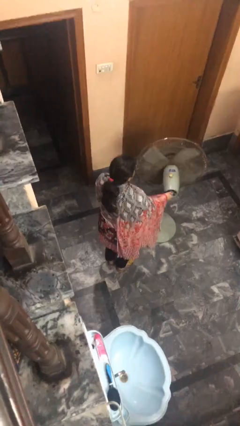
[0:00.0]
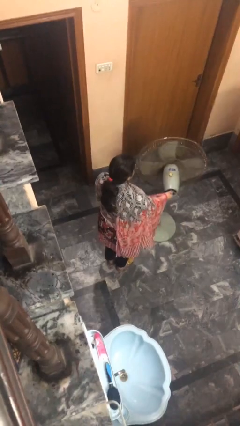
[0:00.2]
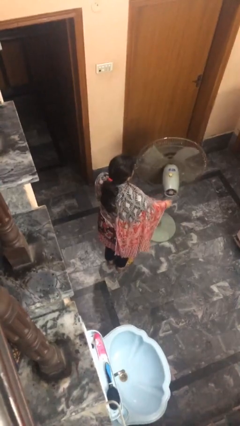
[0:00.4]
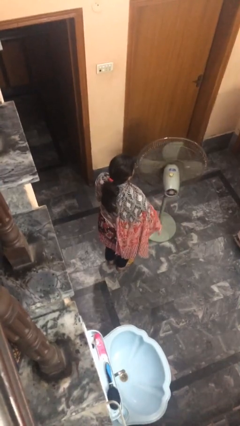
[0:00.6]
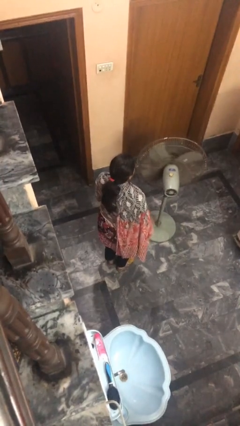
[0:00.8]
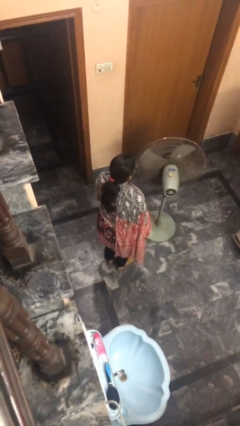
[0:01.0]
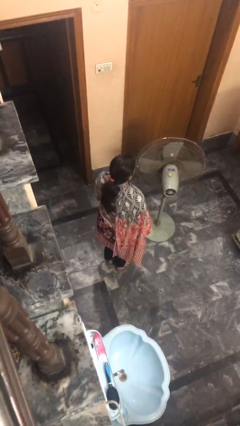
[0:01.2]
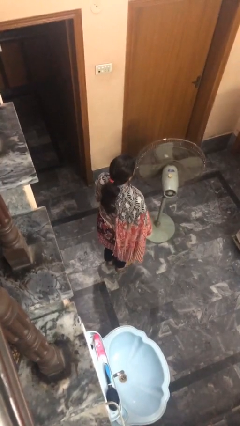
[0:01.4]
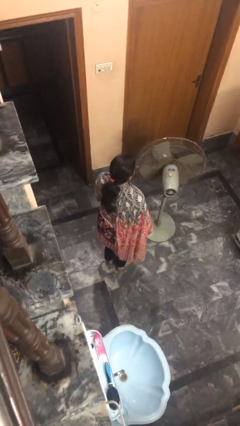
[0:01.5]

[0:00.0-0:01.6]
person turns off fan

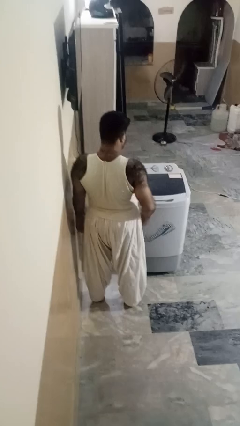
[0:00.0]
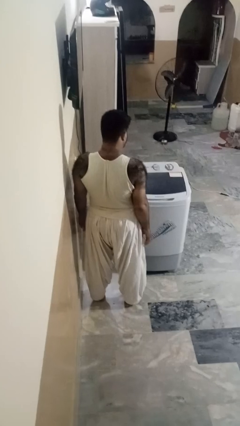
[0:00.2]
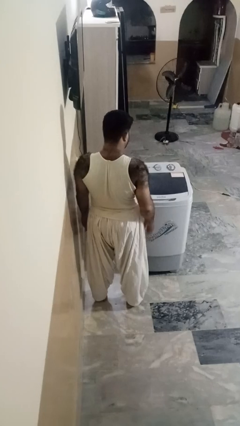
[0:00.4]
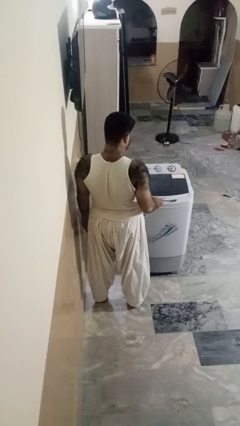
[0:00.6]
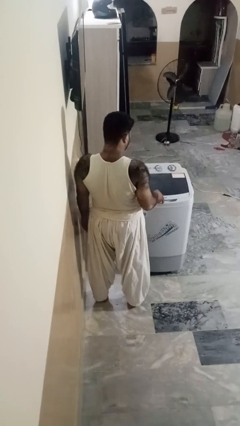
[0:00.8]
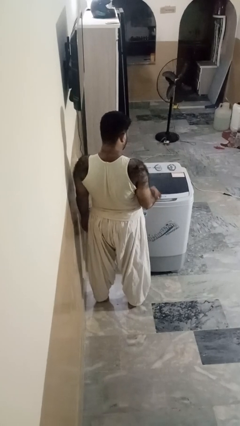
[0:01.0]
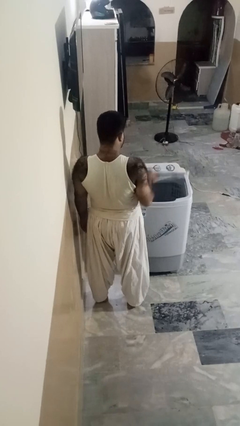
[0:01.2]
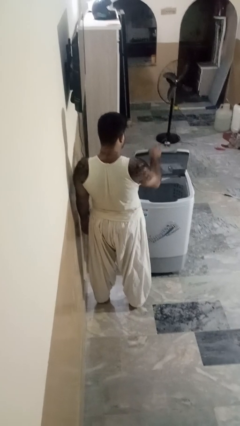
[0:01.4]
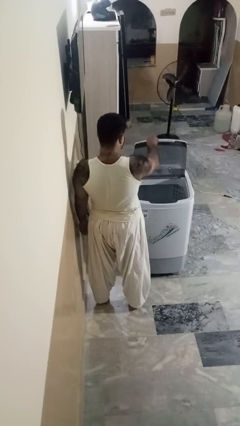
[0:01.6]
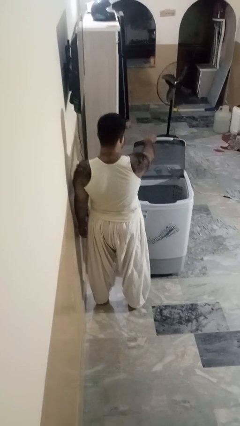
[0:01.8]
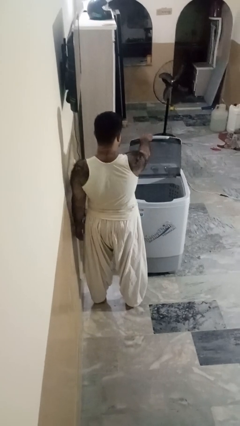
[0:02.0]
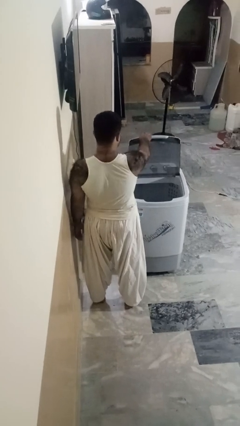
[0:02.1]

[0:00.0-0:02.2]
person opens clothes washer

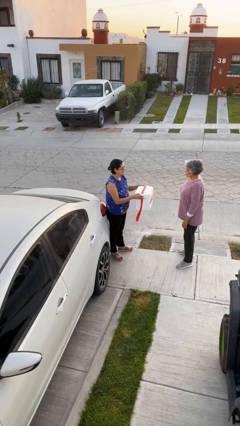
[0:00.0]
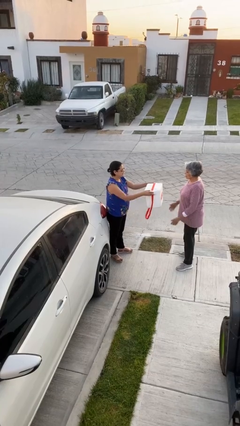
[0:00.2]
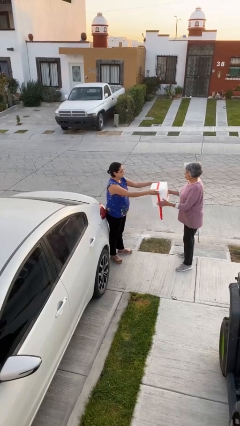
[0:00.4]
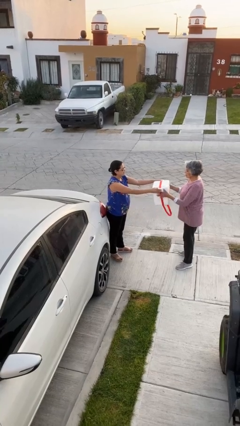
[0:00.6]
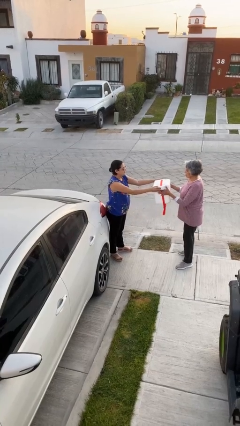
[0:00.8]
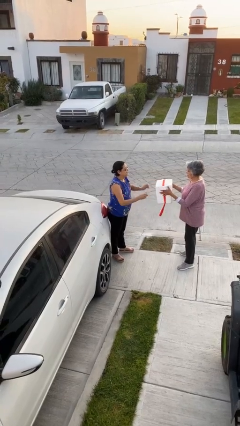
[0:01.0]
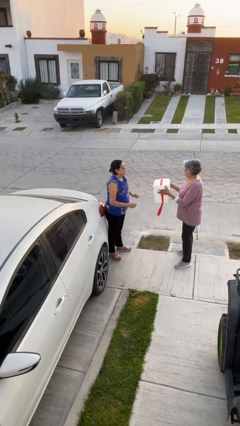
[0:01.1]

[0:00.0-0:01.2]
person transfers object to person

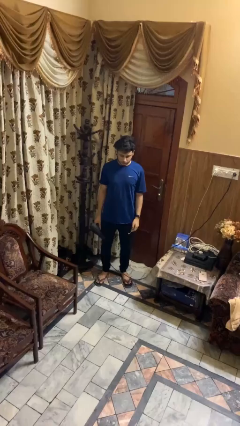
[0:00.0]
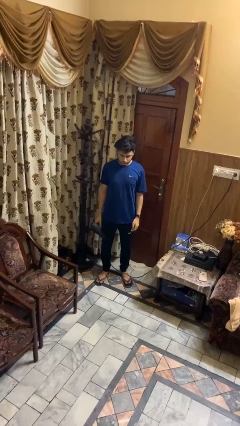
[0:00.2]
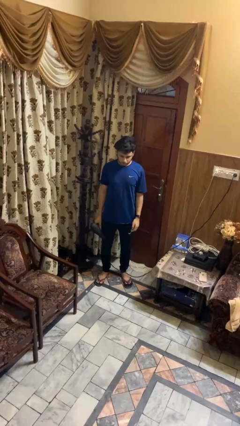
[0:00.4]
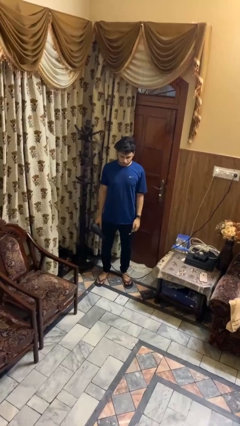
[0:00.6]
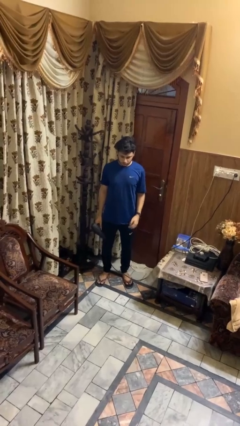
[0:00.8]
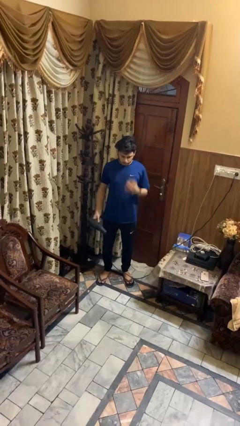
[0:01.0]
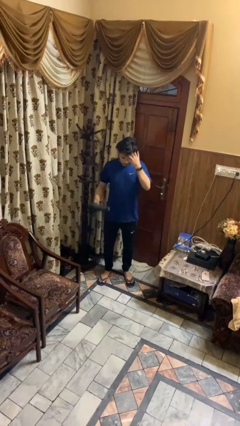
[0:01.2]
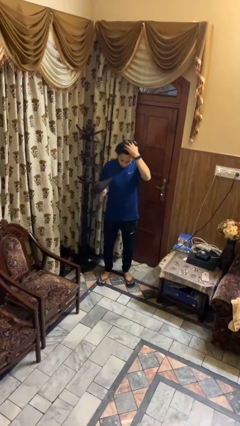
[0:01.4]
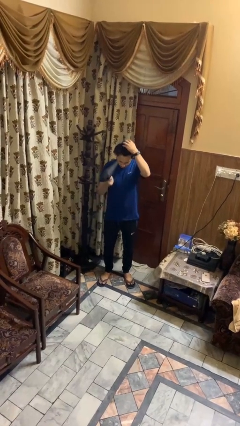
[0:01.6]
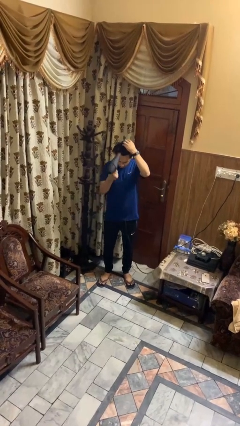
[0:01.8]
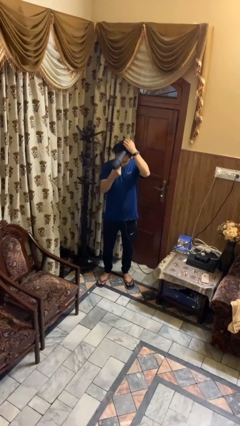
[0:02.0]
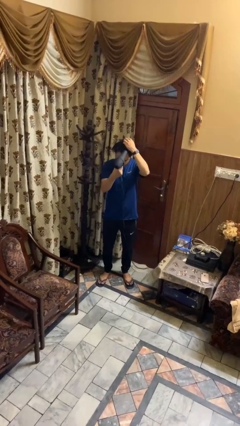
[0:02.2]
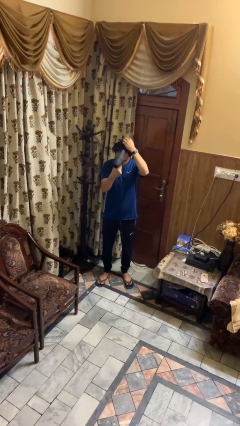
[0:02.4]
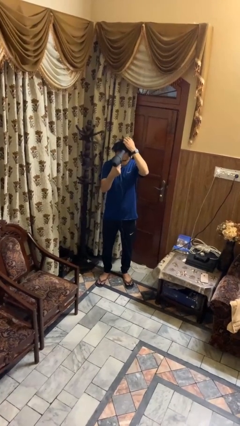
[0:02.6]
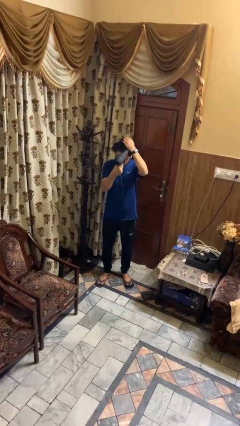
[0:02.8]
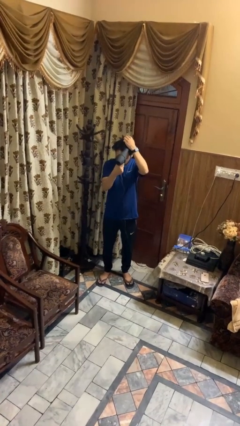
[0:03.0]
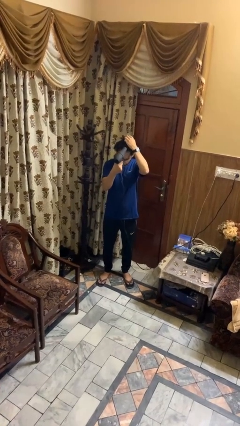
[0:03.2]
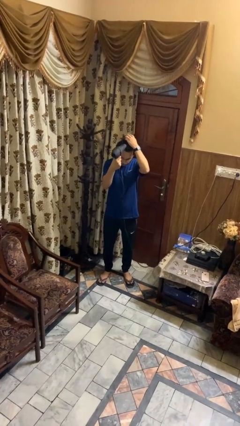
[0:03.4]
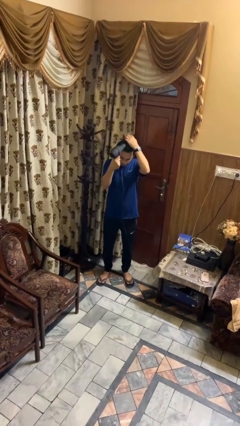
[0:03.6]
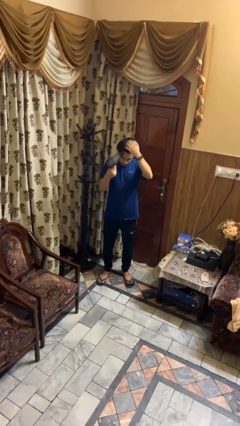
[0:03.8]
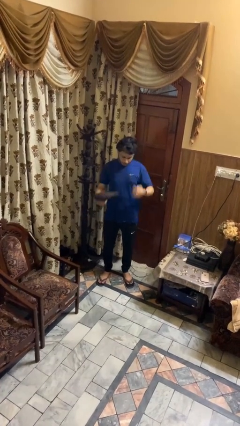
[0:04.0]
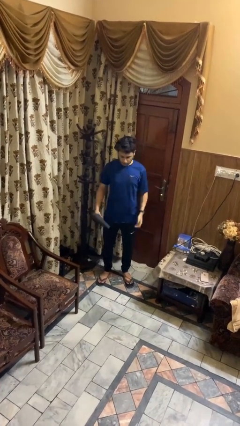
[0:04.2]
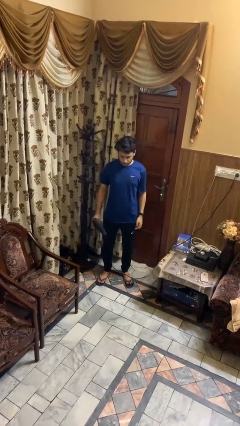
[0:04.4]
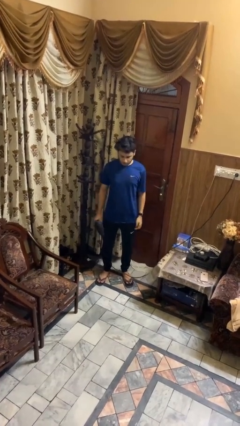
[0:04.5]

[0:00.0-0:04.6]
person dries hair with hairdryer

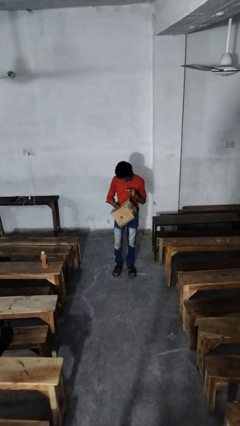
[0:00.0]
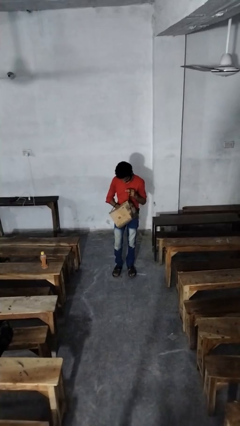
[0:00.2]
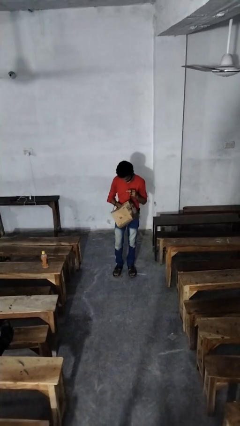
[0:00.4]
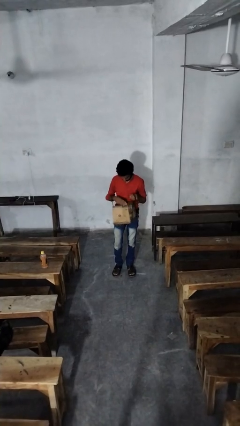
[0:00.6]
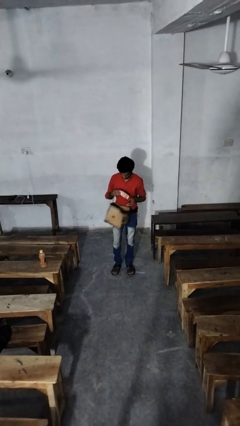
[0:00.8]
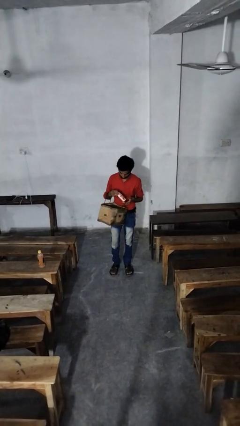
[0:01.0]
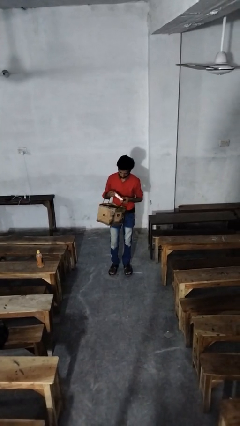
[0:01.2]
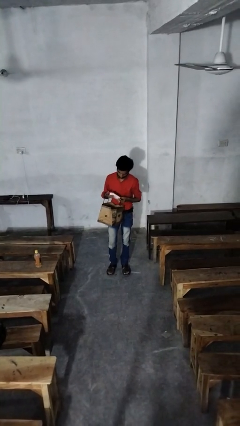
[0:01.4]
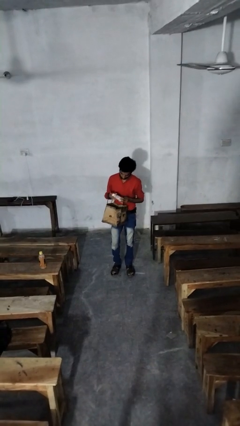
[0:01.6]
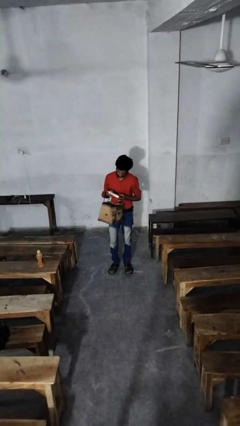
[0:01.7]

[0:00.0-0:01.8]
person takes object from purse

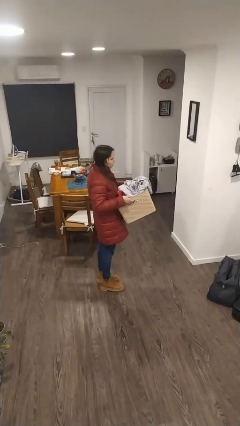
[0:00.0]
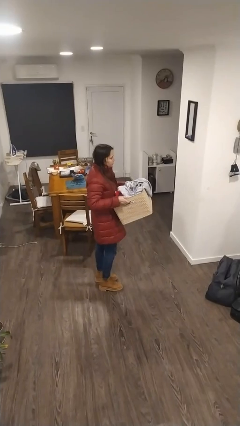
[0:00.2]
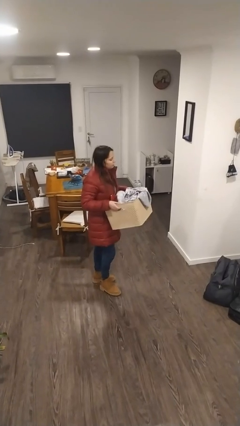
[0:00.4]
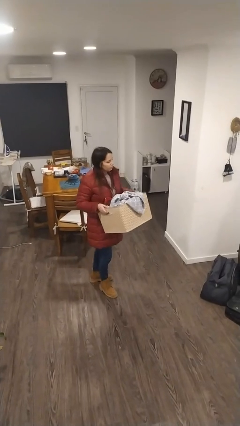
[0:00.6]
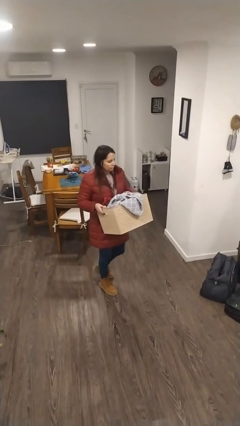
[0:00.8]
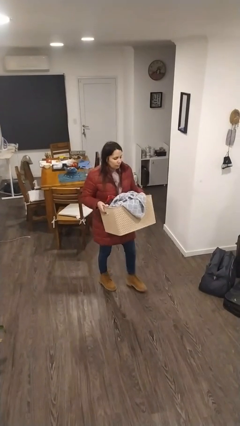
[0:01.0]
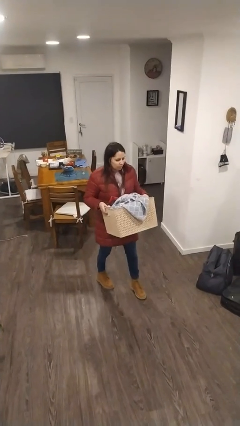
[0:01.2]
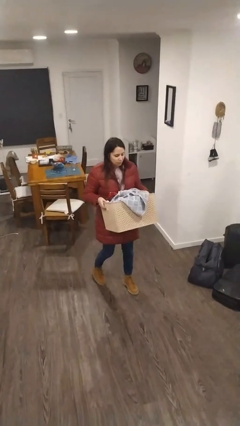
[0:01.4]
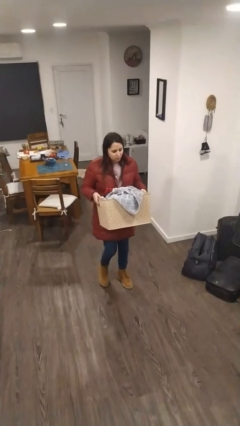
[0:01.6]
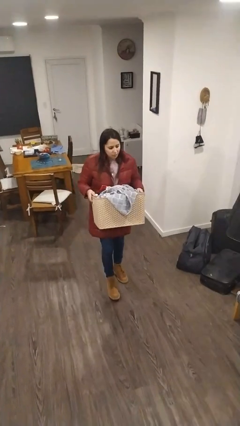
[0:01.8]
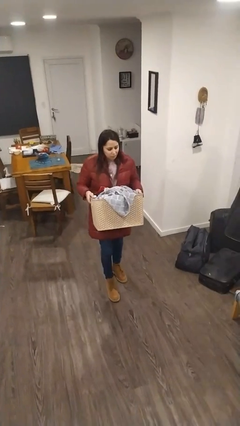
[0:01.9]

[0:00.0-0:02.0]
person carries laundry basket

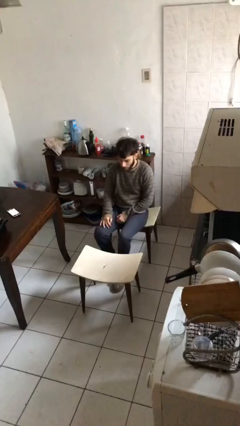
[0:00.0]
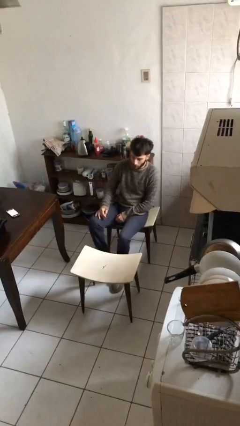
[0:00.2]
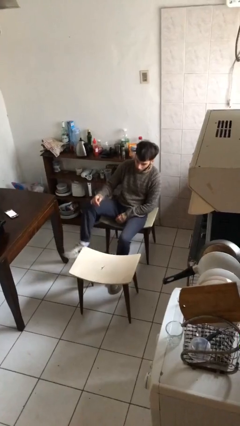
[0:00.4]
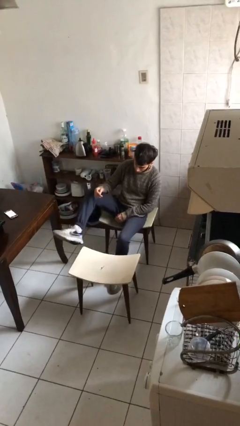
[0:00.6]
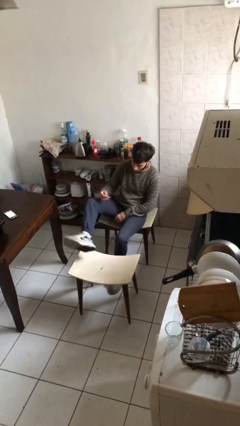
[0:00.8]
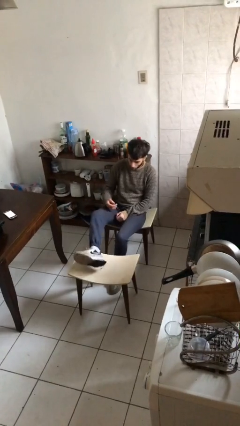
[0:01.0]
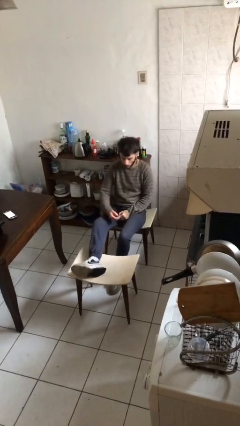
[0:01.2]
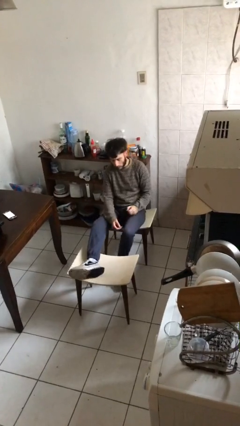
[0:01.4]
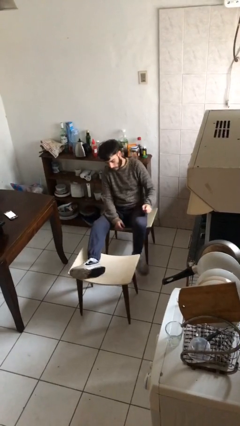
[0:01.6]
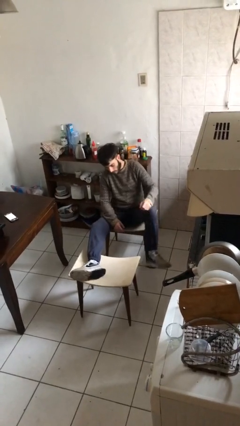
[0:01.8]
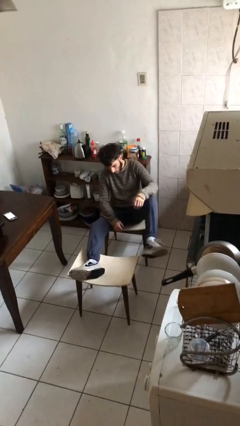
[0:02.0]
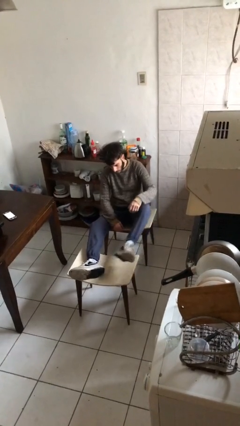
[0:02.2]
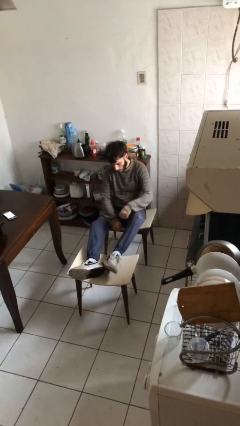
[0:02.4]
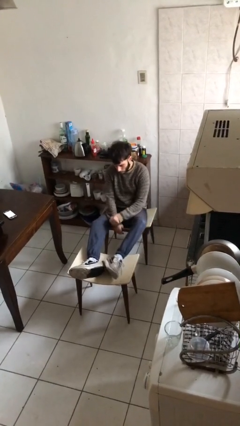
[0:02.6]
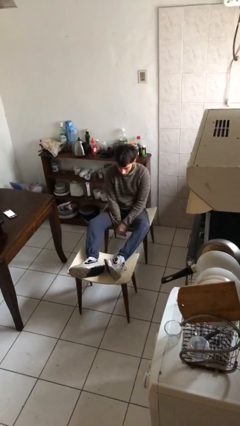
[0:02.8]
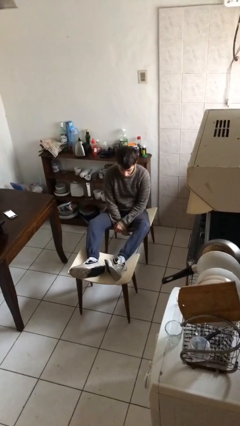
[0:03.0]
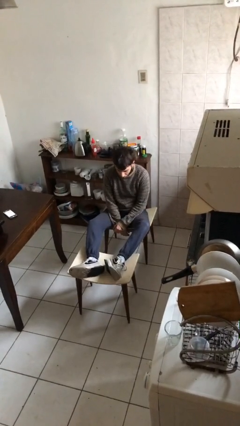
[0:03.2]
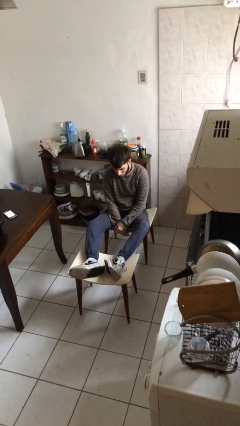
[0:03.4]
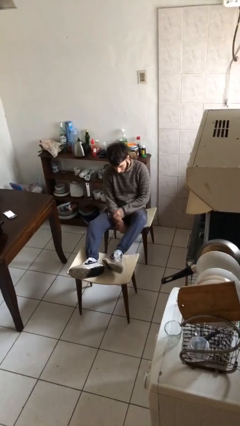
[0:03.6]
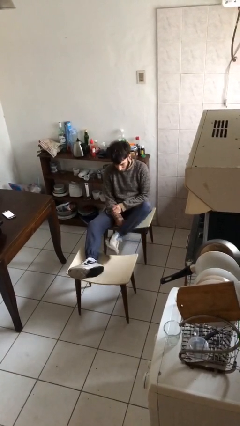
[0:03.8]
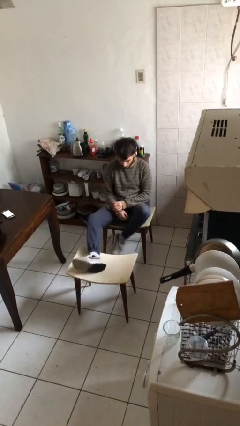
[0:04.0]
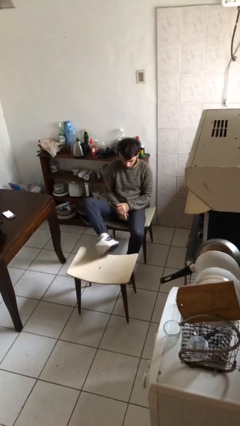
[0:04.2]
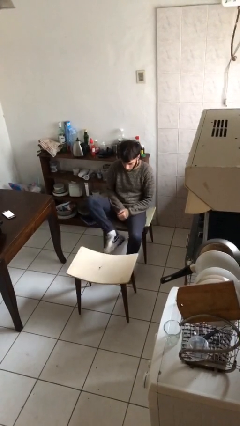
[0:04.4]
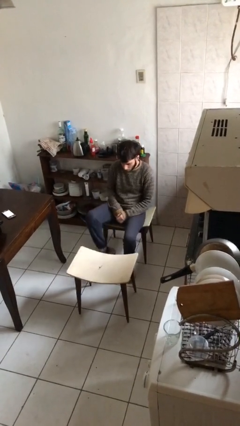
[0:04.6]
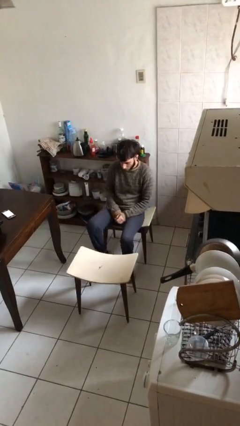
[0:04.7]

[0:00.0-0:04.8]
person puts feet up
